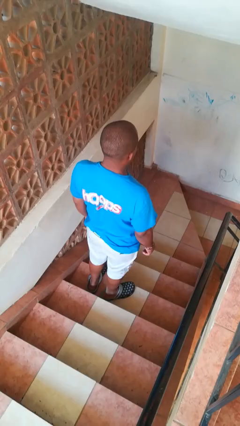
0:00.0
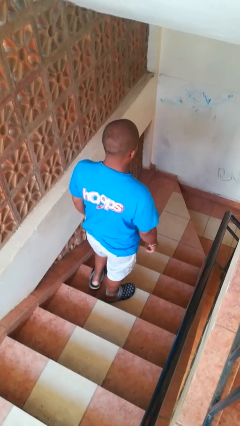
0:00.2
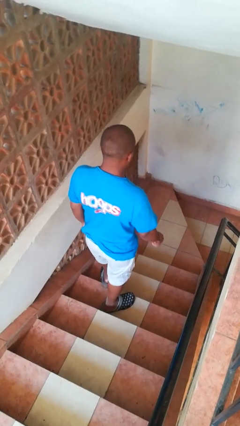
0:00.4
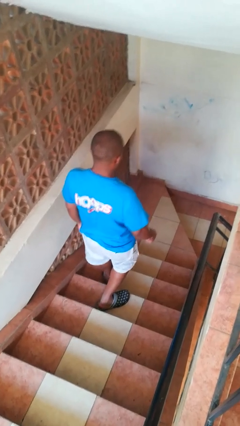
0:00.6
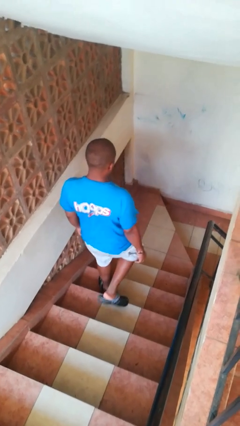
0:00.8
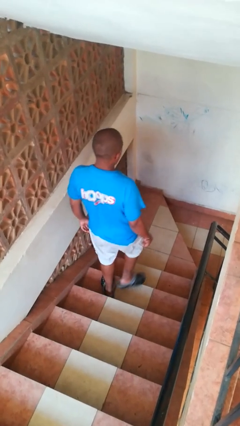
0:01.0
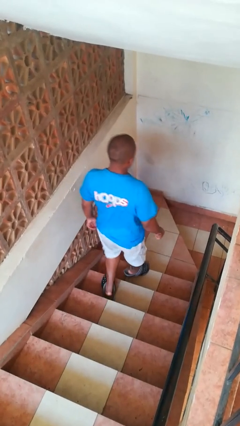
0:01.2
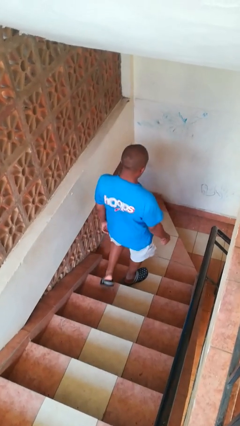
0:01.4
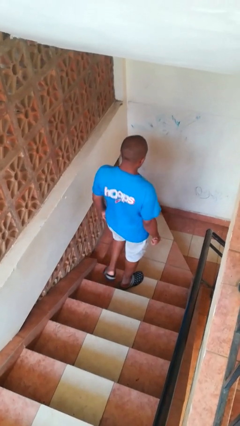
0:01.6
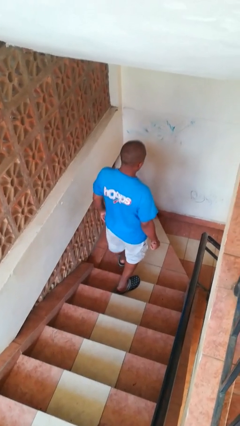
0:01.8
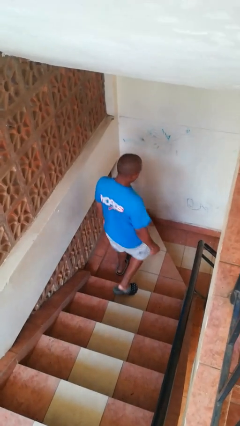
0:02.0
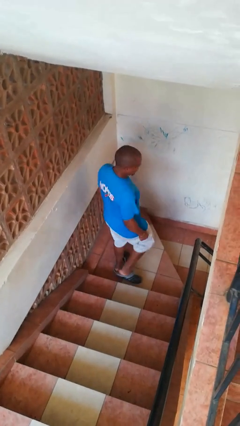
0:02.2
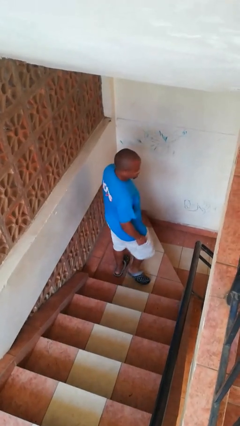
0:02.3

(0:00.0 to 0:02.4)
person climbs down stairs

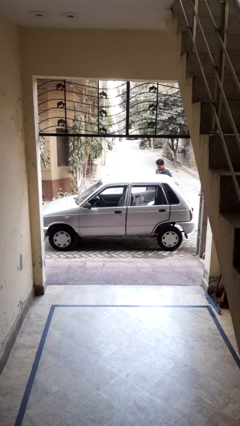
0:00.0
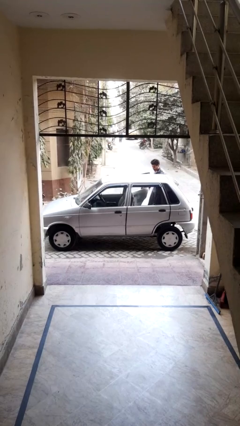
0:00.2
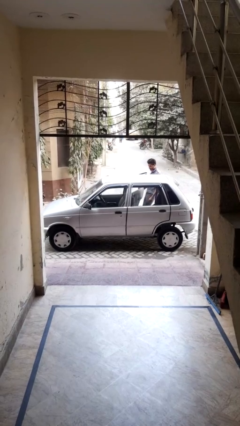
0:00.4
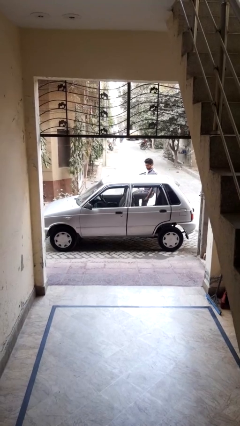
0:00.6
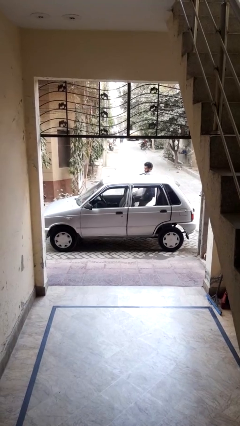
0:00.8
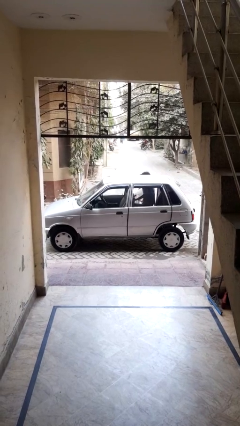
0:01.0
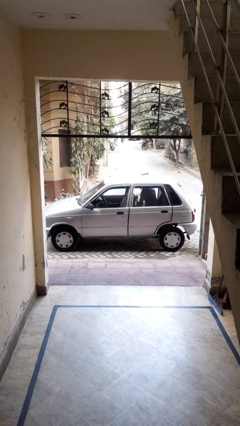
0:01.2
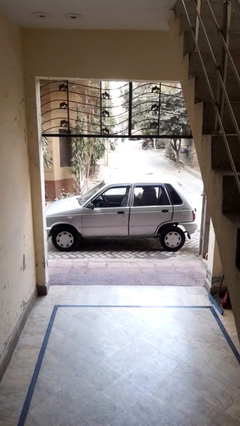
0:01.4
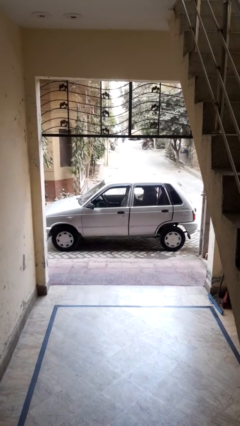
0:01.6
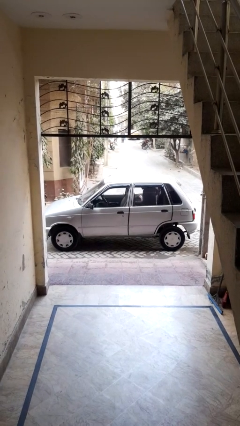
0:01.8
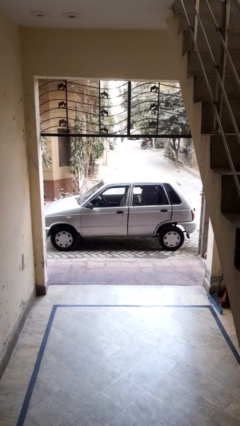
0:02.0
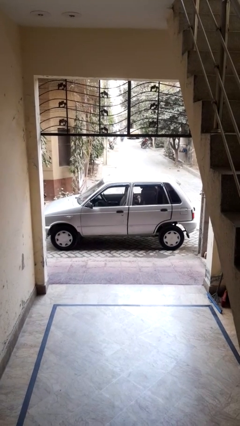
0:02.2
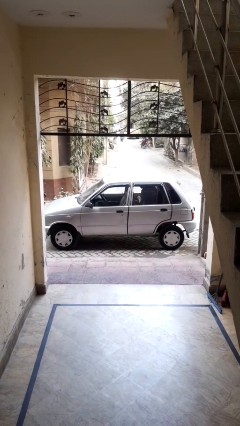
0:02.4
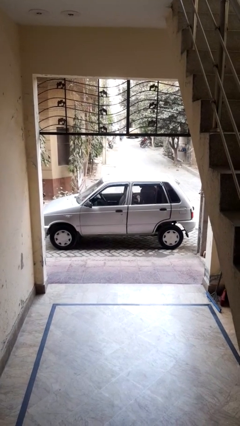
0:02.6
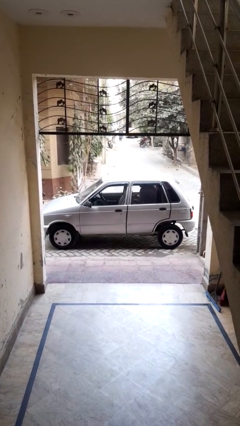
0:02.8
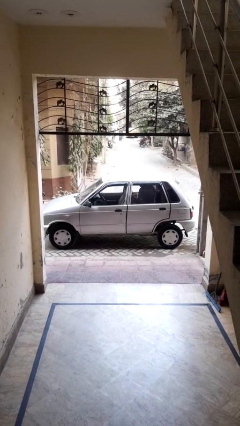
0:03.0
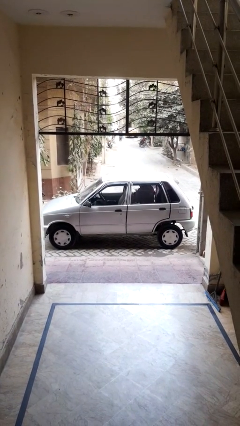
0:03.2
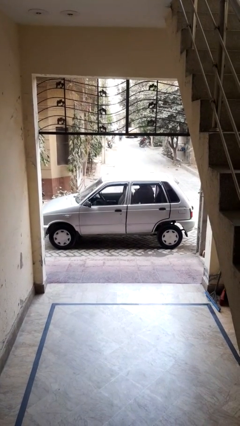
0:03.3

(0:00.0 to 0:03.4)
car picks up person

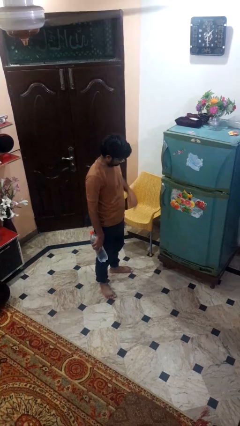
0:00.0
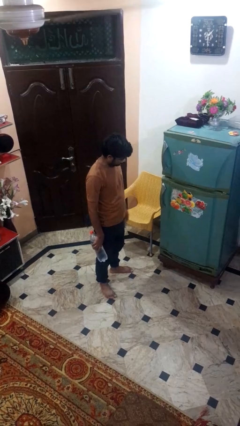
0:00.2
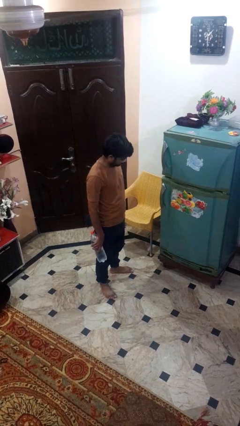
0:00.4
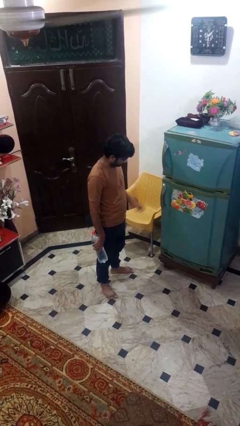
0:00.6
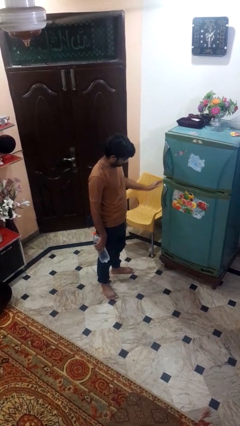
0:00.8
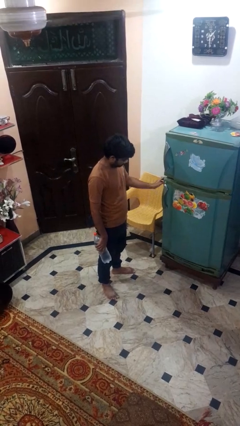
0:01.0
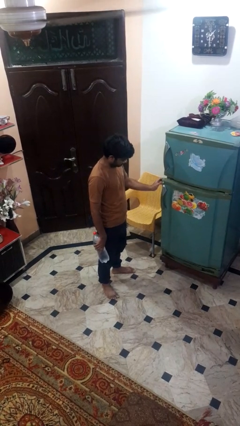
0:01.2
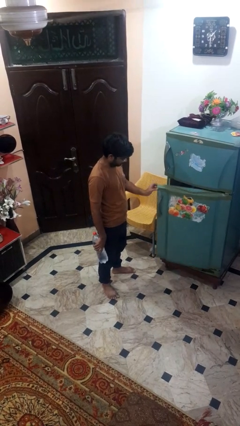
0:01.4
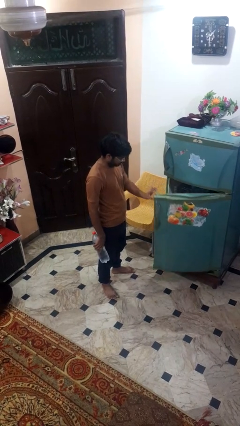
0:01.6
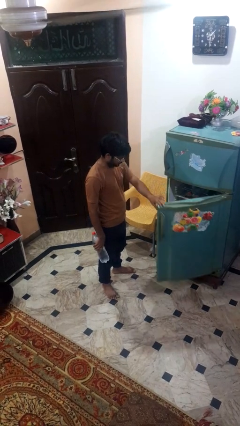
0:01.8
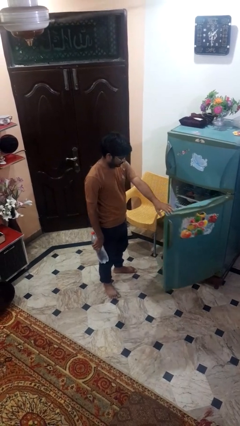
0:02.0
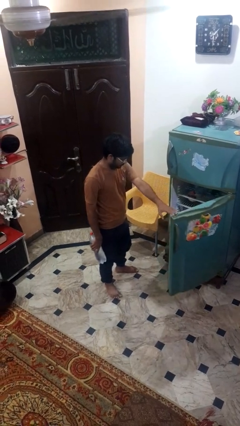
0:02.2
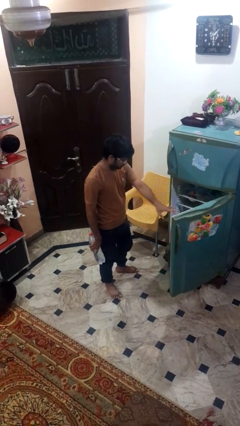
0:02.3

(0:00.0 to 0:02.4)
person opens refrigerator

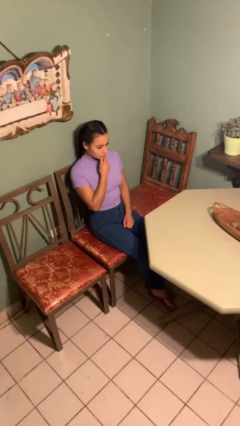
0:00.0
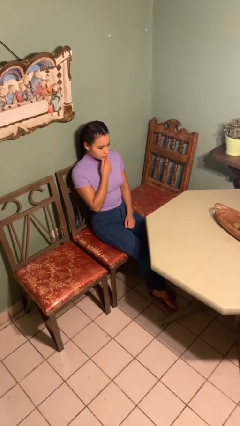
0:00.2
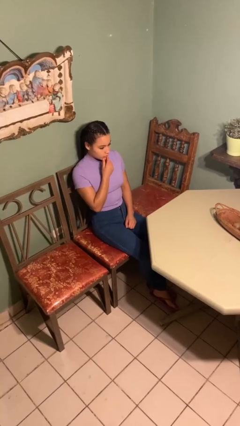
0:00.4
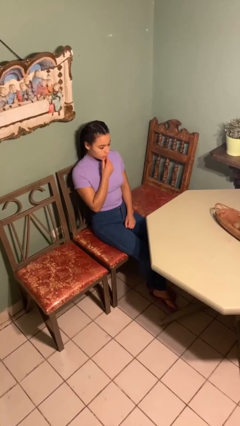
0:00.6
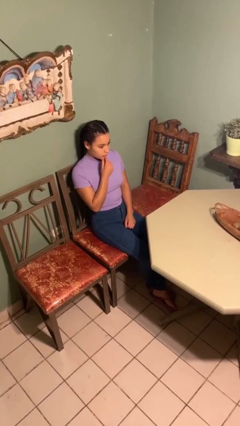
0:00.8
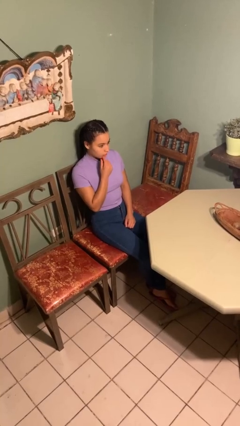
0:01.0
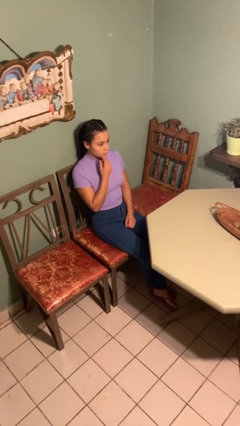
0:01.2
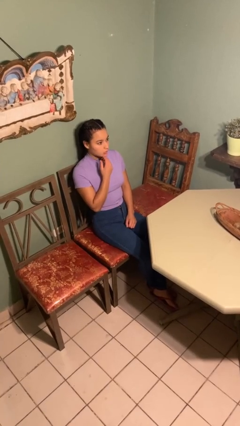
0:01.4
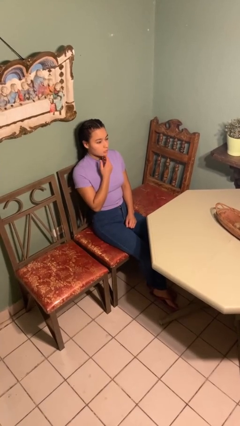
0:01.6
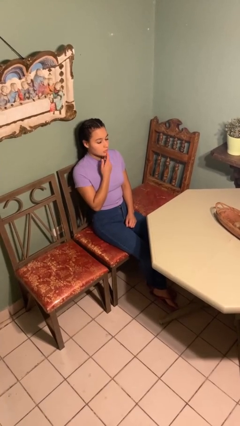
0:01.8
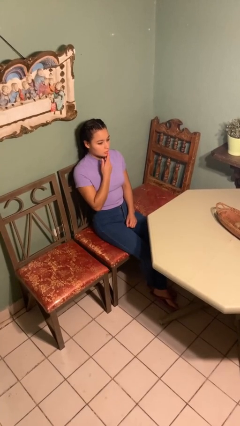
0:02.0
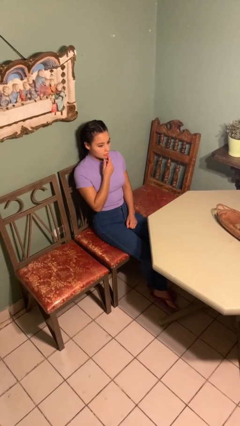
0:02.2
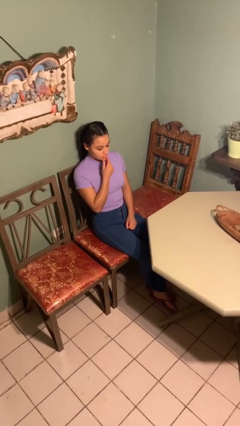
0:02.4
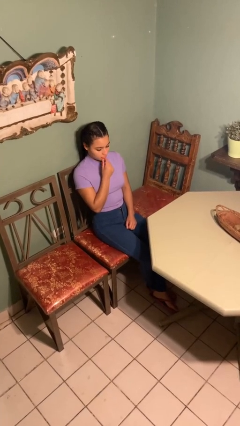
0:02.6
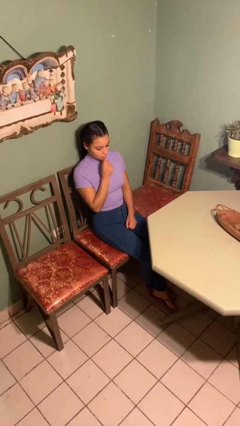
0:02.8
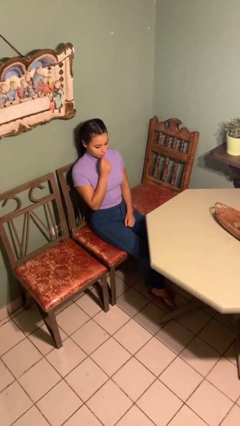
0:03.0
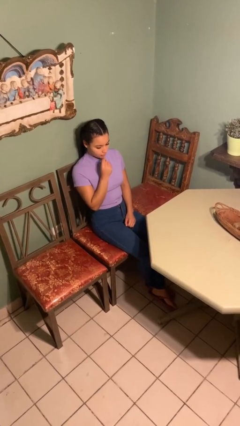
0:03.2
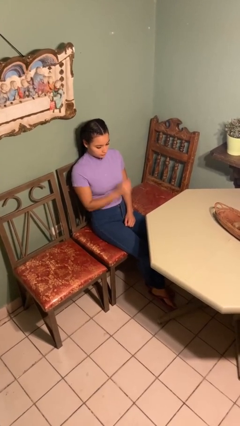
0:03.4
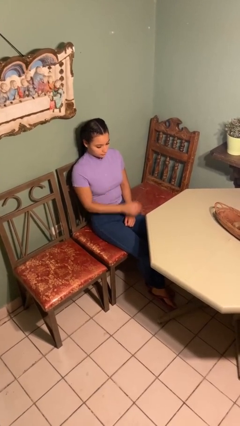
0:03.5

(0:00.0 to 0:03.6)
person strokes chin

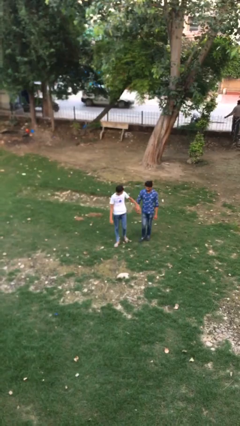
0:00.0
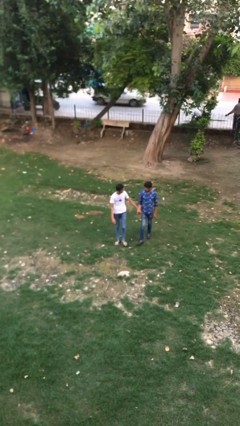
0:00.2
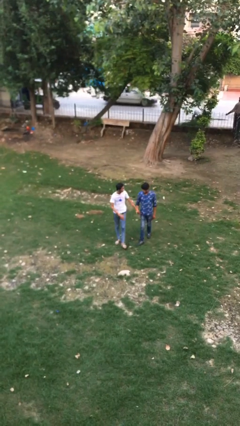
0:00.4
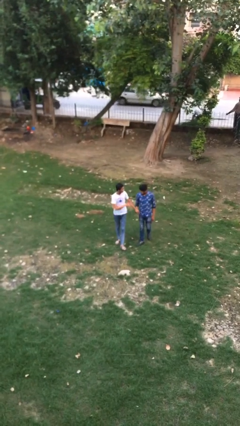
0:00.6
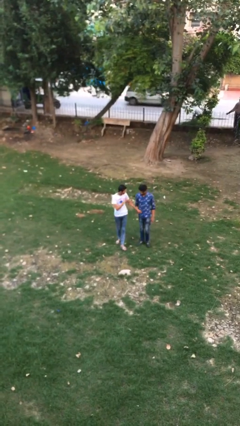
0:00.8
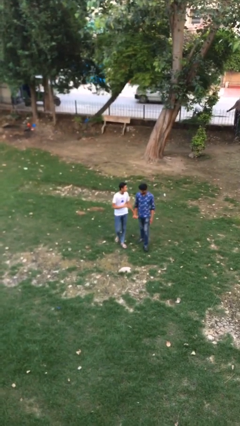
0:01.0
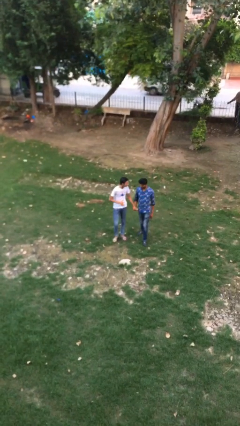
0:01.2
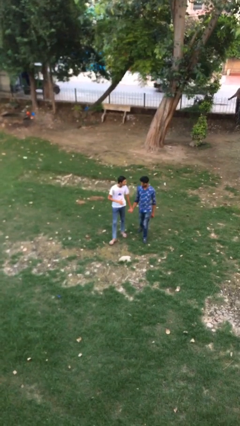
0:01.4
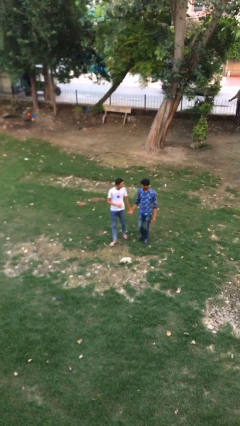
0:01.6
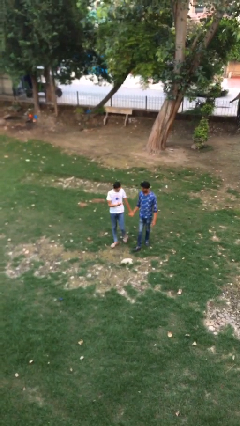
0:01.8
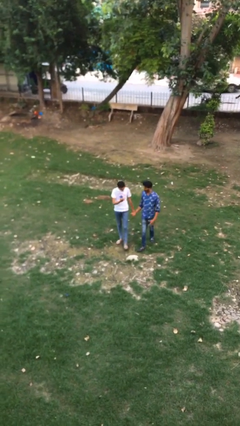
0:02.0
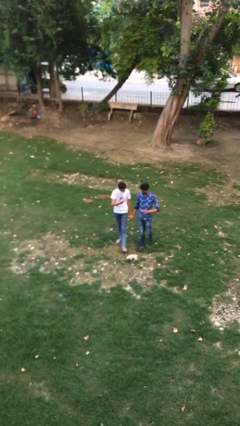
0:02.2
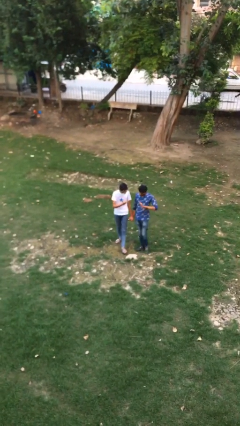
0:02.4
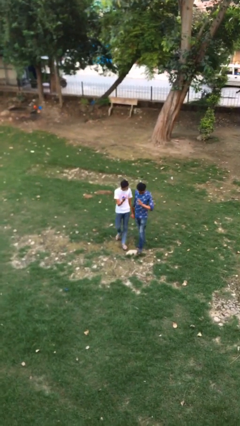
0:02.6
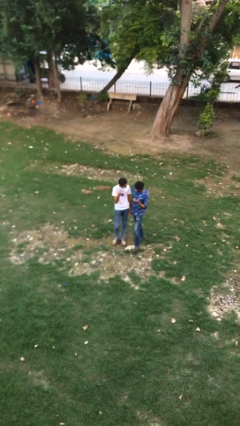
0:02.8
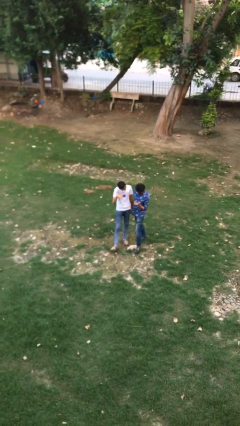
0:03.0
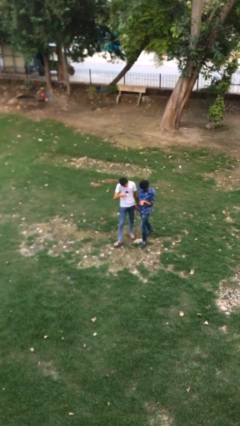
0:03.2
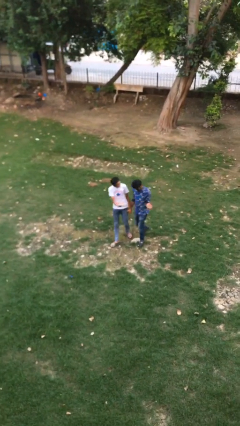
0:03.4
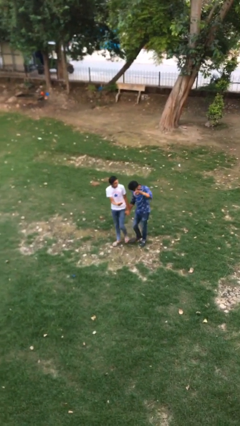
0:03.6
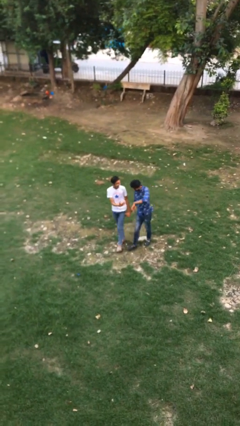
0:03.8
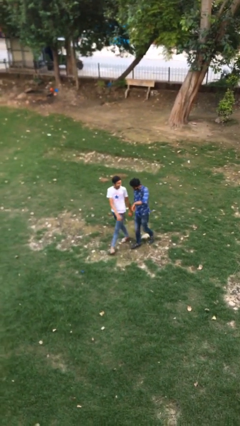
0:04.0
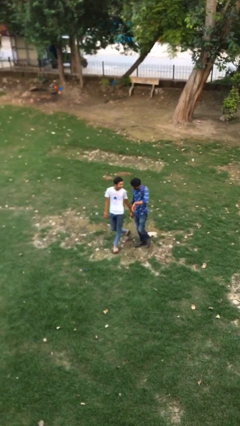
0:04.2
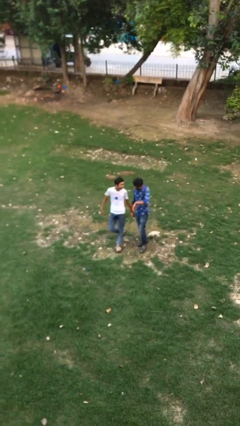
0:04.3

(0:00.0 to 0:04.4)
person holds hand

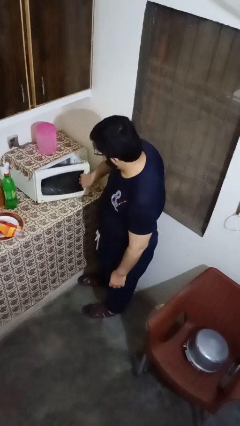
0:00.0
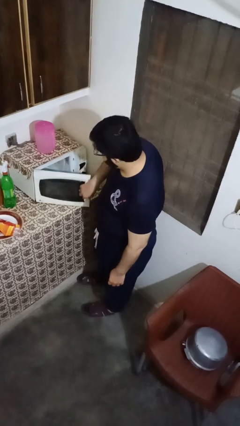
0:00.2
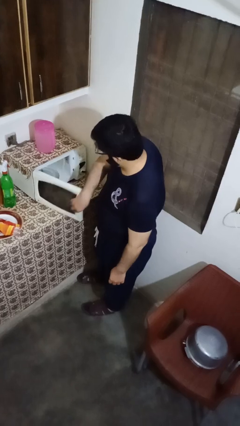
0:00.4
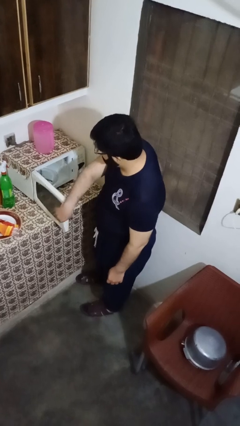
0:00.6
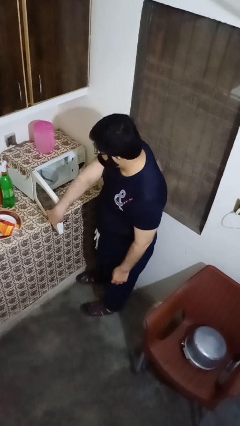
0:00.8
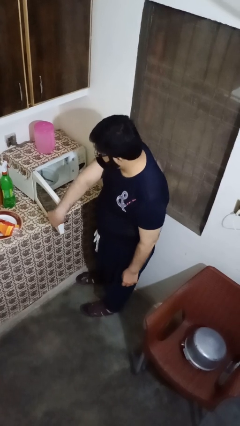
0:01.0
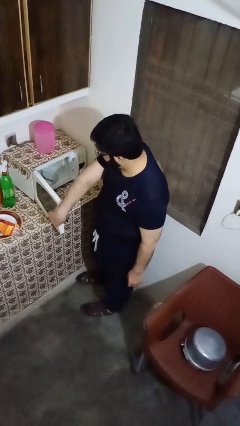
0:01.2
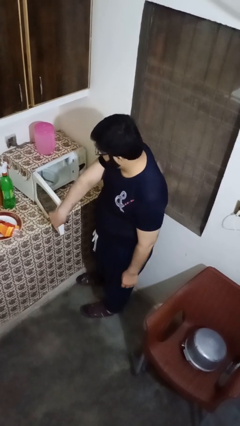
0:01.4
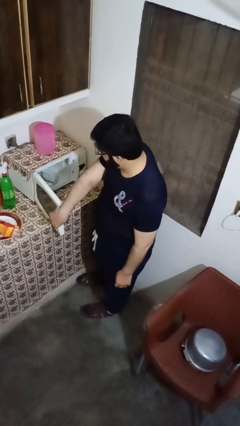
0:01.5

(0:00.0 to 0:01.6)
person opens oven door
